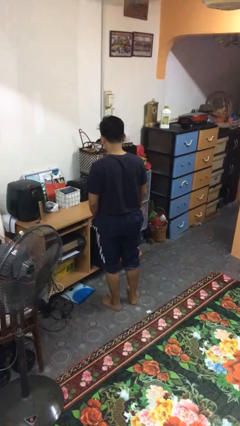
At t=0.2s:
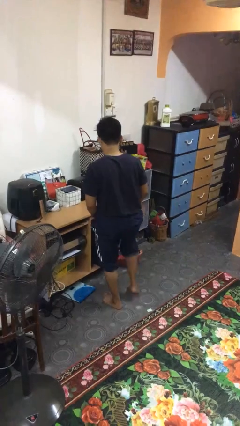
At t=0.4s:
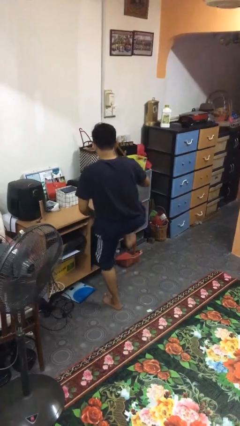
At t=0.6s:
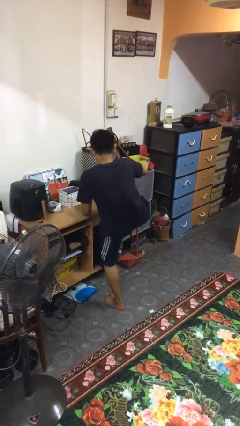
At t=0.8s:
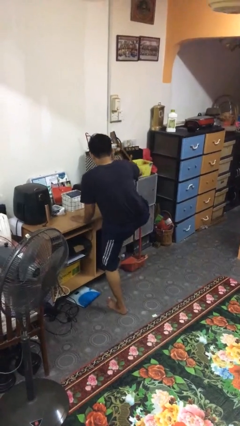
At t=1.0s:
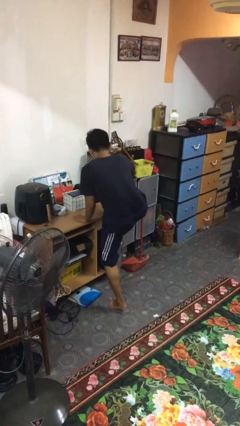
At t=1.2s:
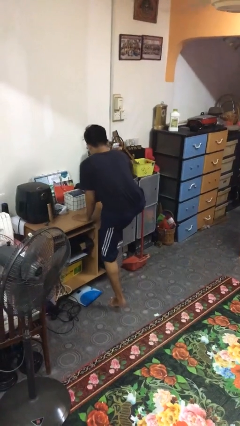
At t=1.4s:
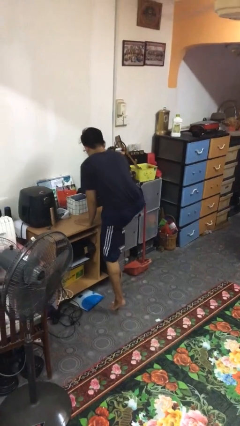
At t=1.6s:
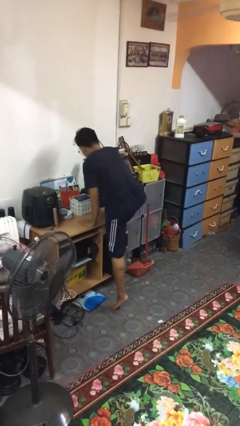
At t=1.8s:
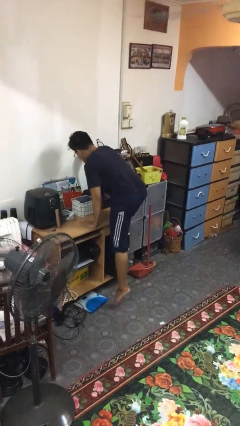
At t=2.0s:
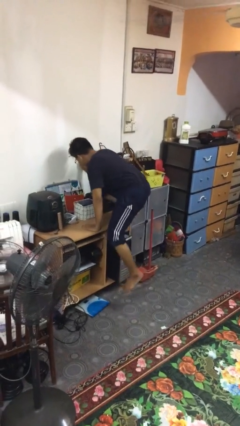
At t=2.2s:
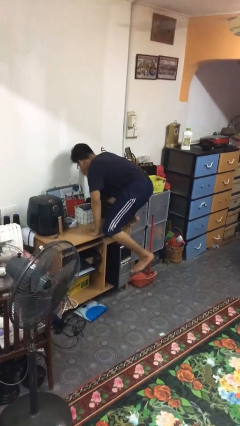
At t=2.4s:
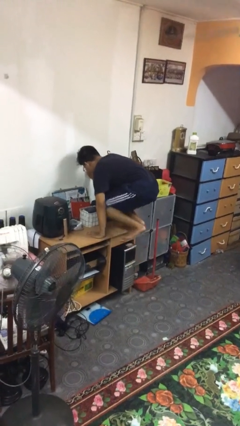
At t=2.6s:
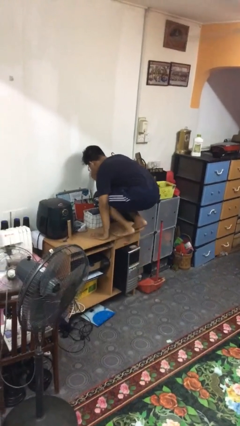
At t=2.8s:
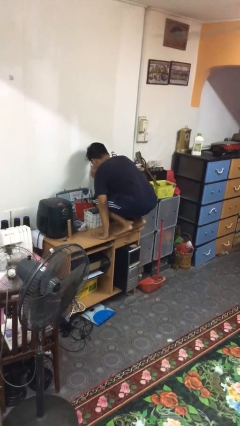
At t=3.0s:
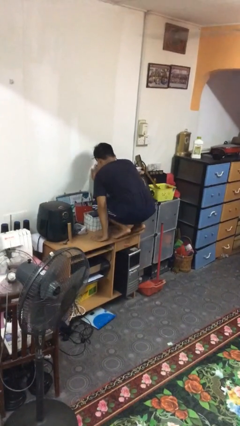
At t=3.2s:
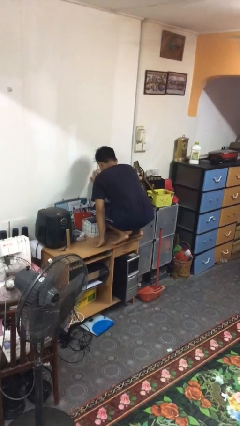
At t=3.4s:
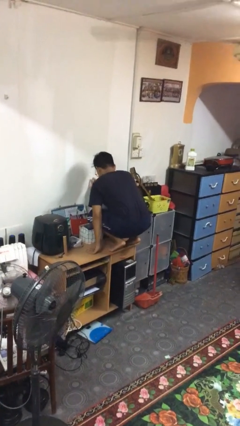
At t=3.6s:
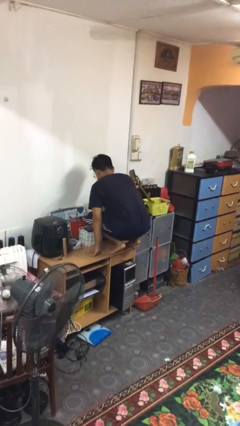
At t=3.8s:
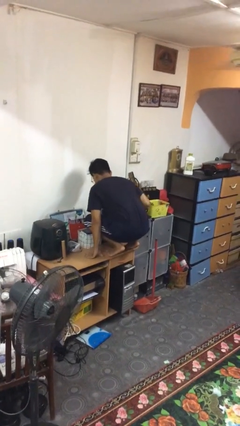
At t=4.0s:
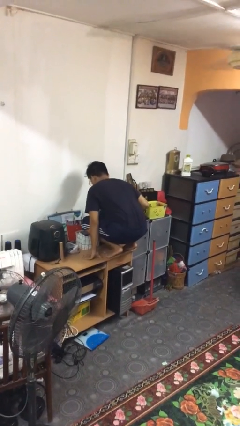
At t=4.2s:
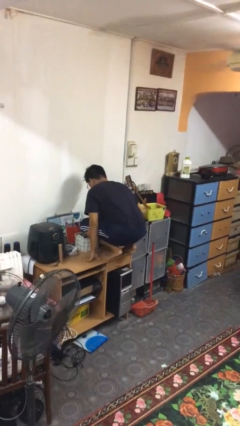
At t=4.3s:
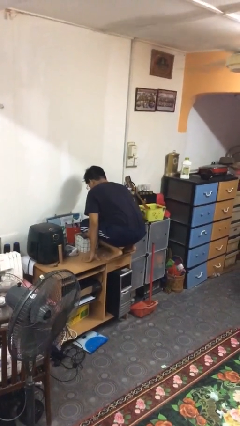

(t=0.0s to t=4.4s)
person climbs on table

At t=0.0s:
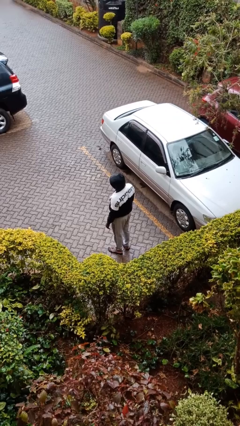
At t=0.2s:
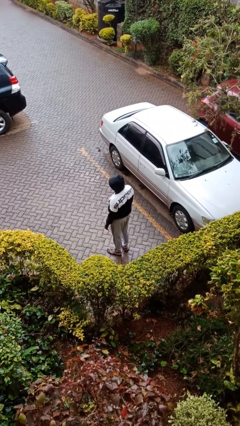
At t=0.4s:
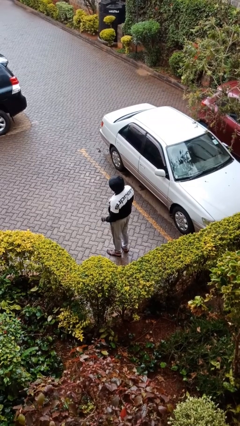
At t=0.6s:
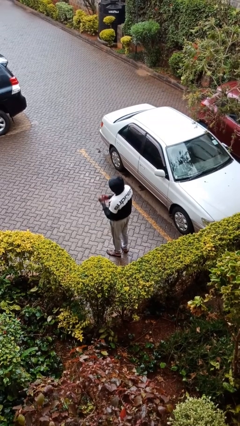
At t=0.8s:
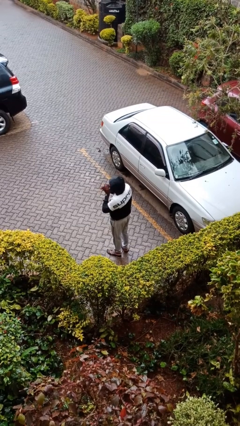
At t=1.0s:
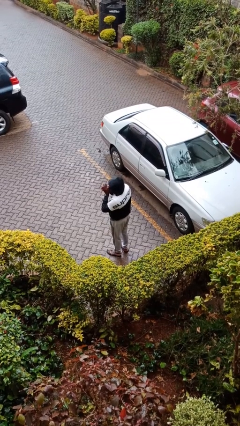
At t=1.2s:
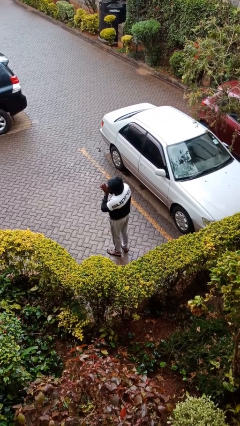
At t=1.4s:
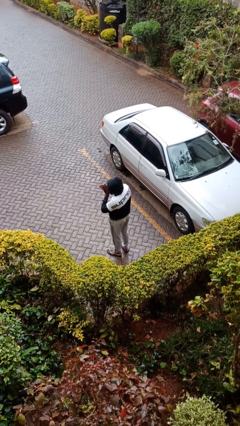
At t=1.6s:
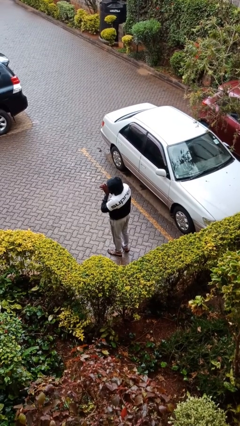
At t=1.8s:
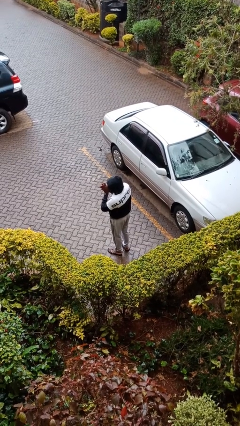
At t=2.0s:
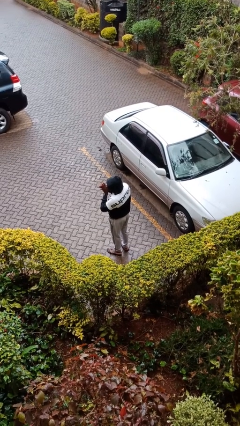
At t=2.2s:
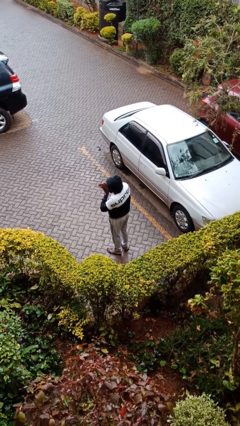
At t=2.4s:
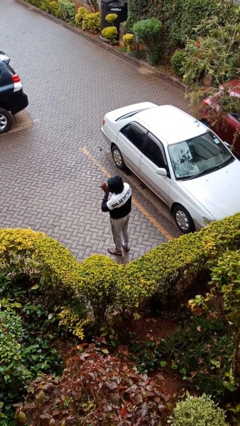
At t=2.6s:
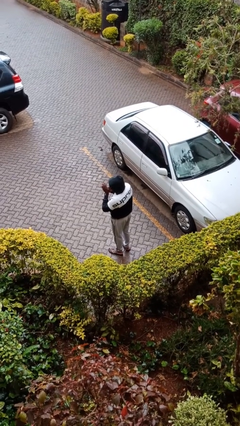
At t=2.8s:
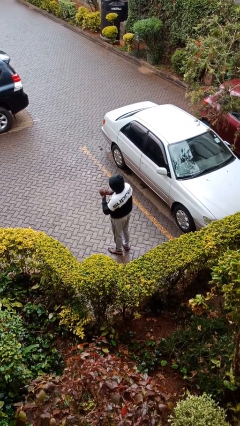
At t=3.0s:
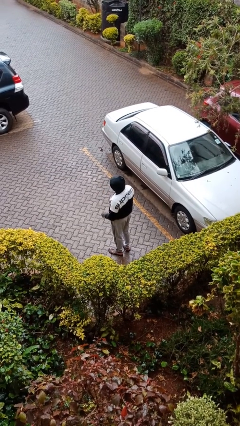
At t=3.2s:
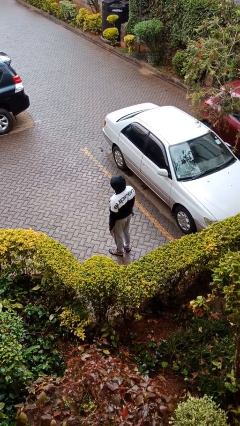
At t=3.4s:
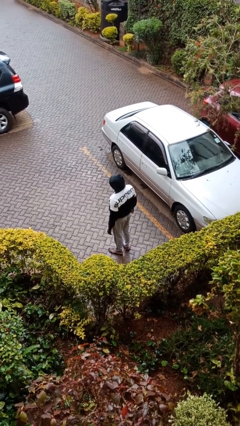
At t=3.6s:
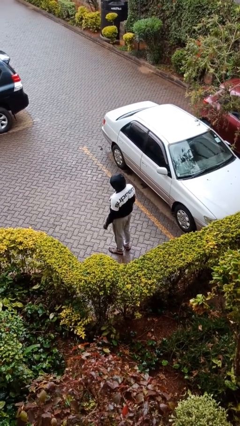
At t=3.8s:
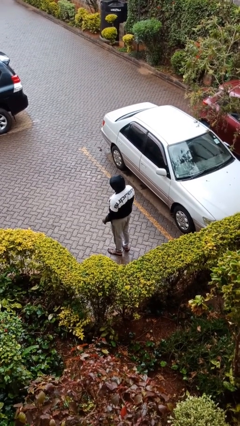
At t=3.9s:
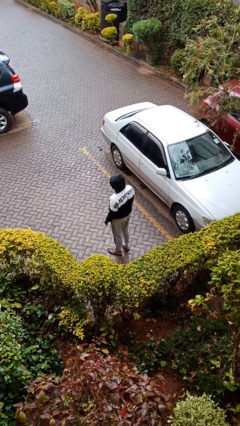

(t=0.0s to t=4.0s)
person blows into hands

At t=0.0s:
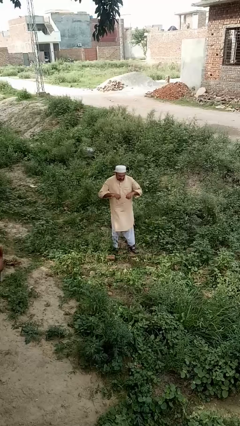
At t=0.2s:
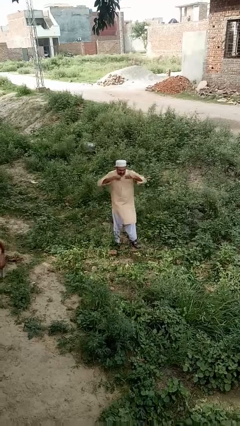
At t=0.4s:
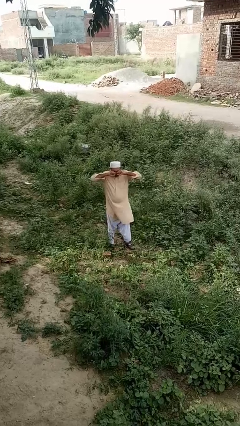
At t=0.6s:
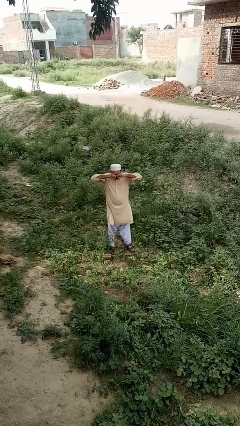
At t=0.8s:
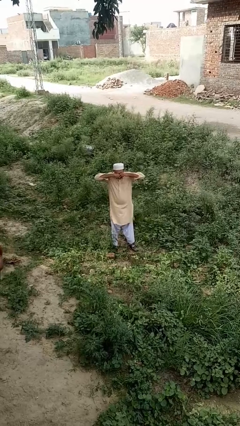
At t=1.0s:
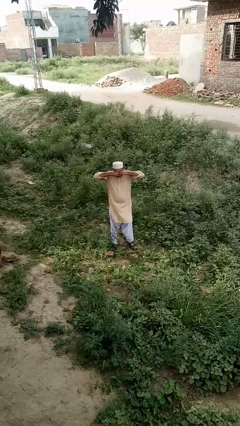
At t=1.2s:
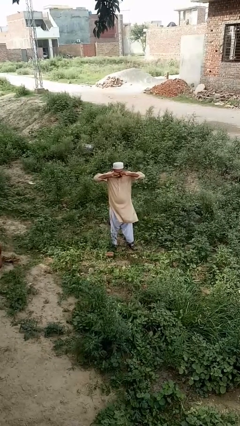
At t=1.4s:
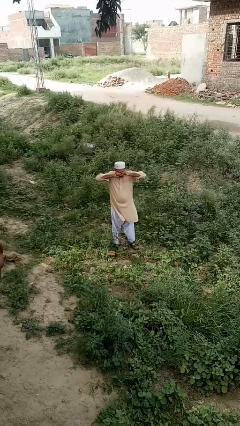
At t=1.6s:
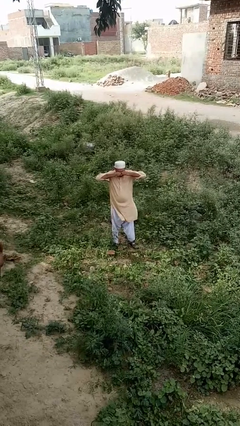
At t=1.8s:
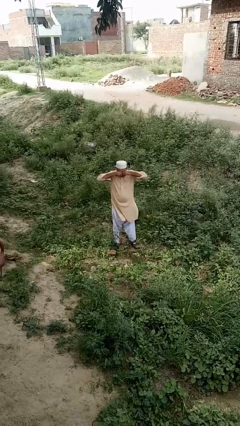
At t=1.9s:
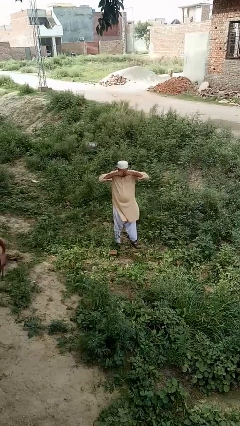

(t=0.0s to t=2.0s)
person rubs eyes

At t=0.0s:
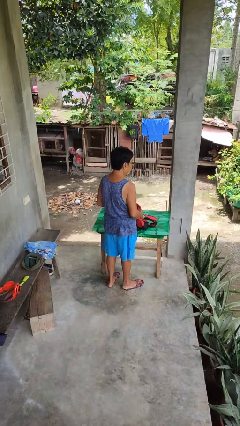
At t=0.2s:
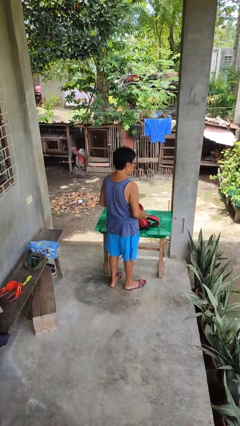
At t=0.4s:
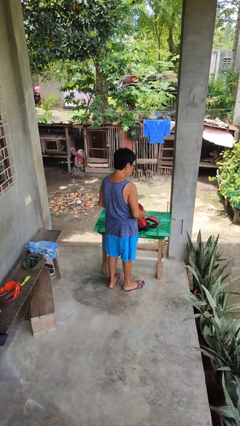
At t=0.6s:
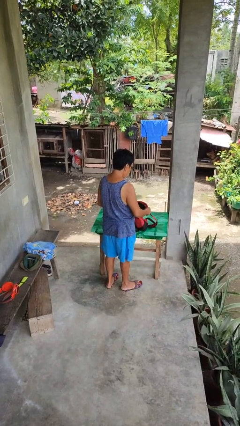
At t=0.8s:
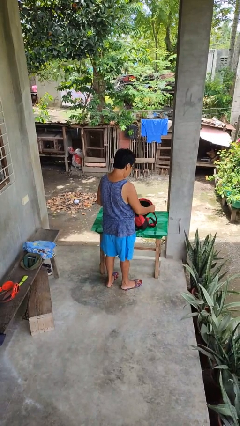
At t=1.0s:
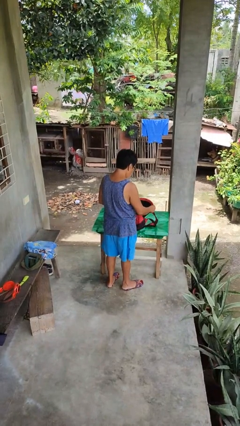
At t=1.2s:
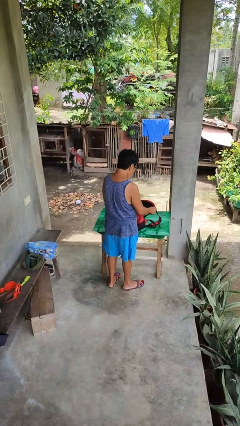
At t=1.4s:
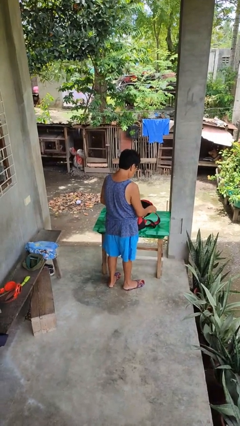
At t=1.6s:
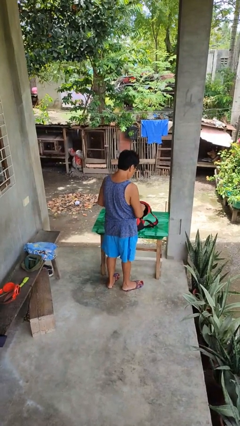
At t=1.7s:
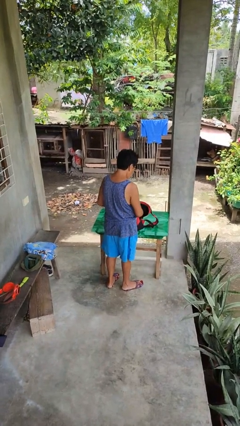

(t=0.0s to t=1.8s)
person searches in backpack

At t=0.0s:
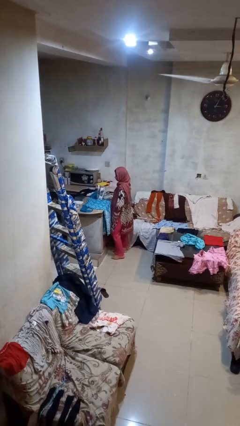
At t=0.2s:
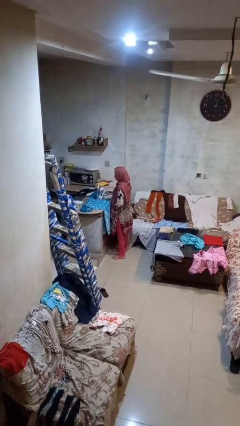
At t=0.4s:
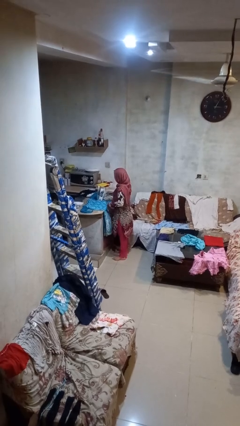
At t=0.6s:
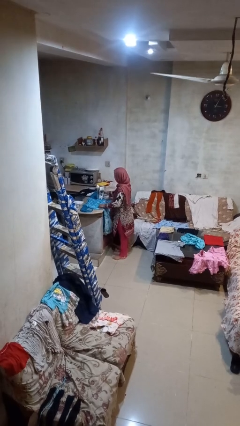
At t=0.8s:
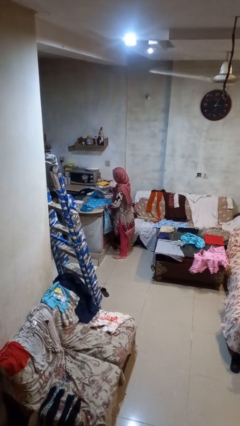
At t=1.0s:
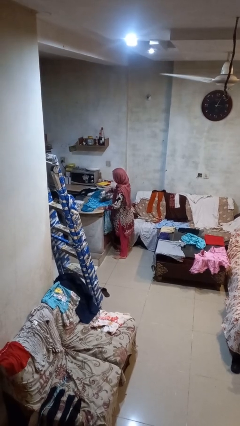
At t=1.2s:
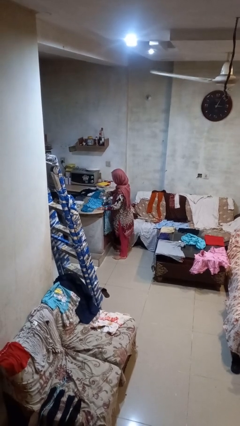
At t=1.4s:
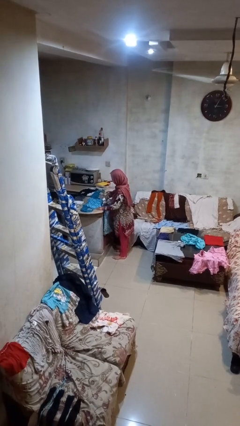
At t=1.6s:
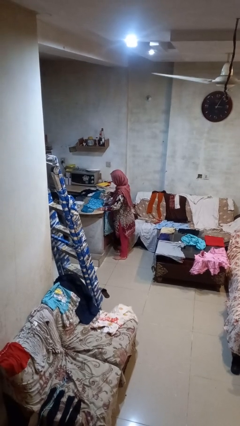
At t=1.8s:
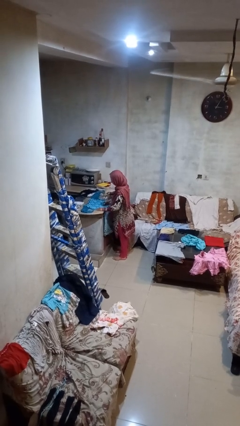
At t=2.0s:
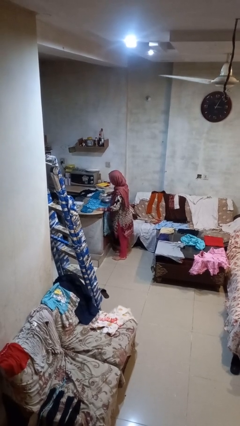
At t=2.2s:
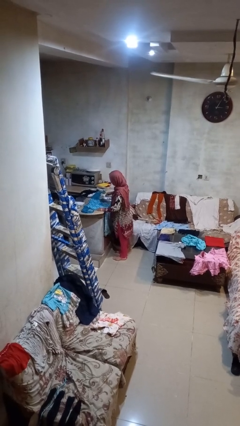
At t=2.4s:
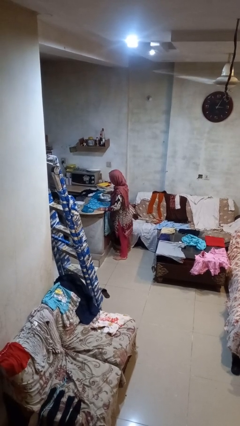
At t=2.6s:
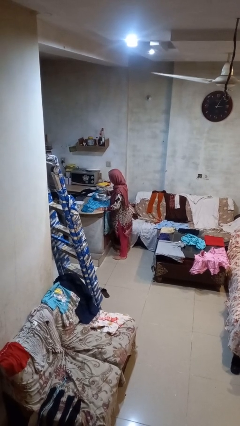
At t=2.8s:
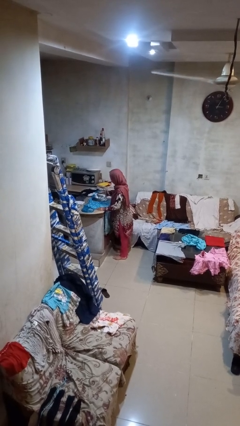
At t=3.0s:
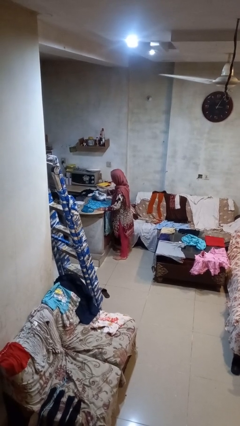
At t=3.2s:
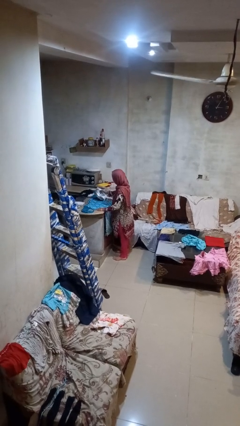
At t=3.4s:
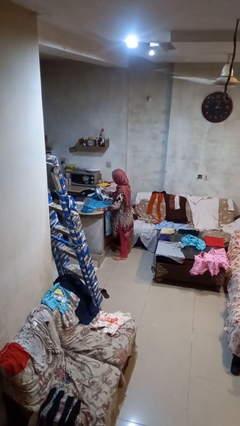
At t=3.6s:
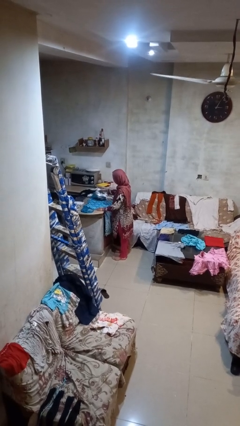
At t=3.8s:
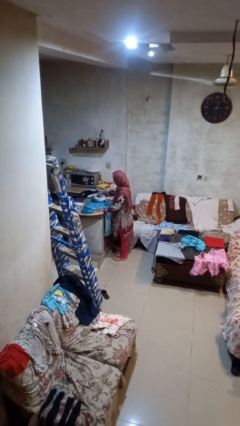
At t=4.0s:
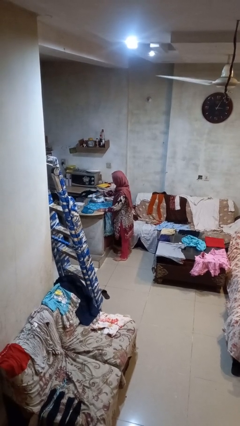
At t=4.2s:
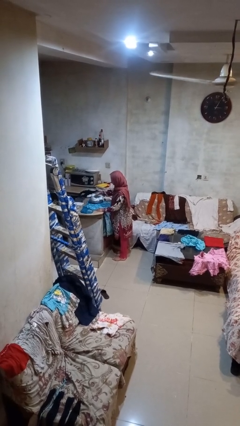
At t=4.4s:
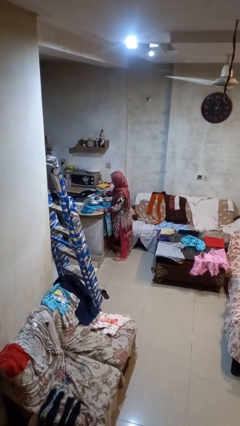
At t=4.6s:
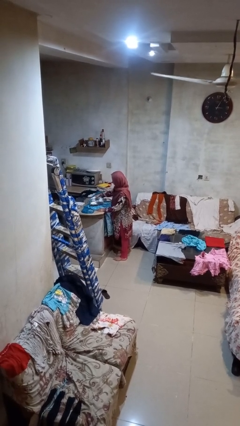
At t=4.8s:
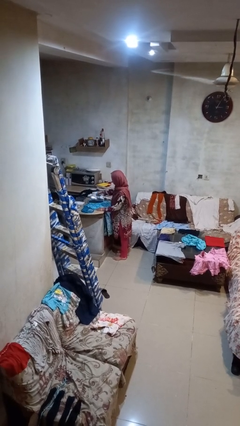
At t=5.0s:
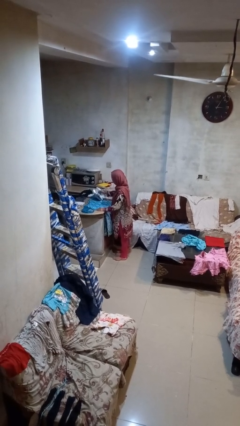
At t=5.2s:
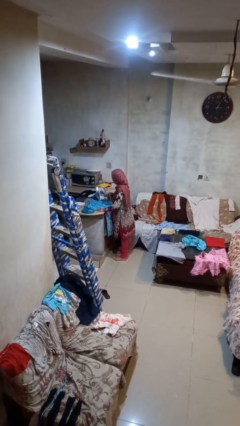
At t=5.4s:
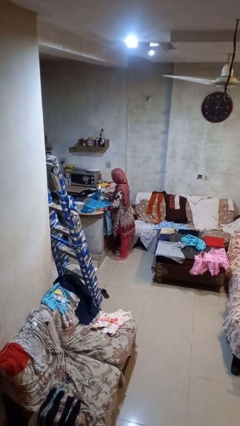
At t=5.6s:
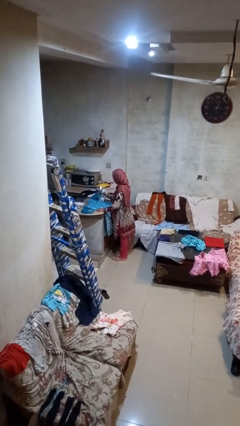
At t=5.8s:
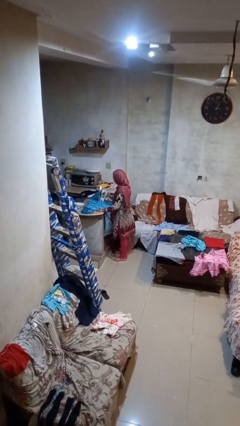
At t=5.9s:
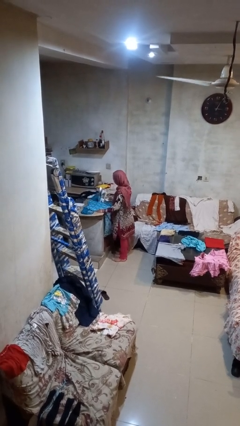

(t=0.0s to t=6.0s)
person irons clothes
